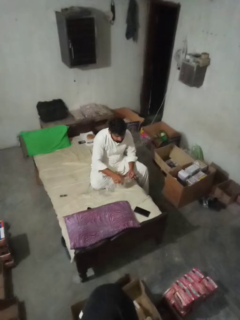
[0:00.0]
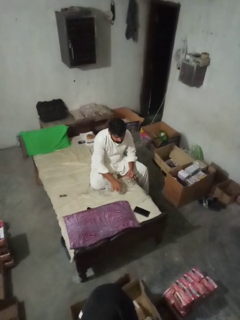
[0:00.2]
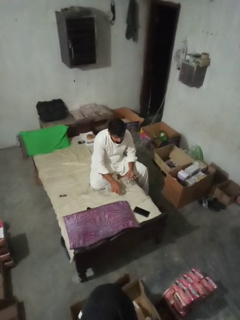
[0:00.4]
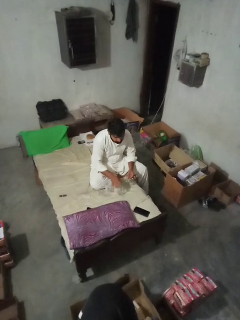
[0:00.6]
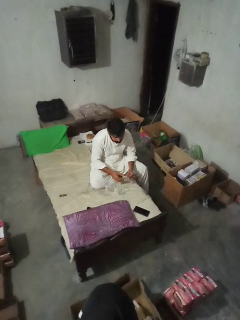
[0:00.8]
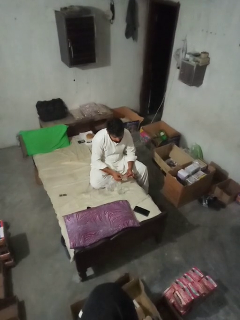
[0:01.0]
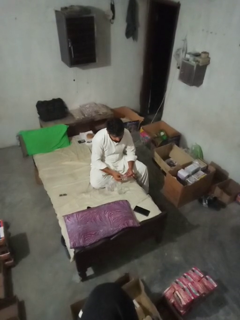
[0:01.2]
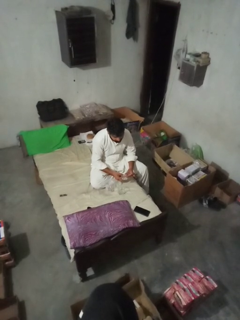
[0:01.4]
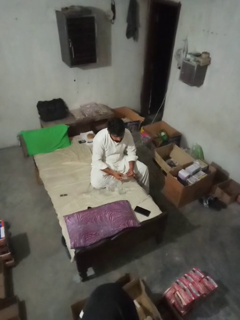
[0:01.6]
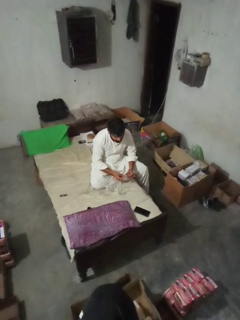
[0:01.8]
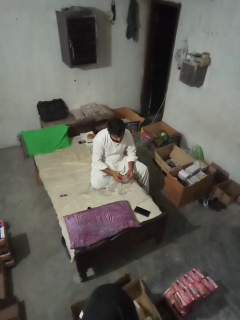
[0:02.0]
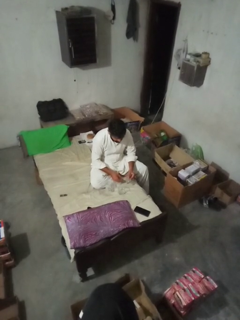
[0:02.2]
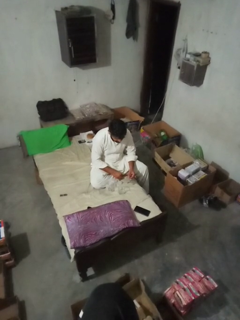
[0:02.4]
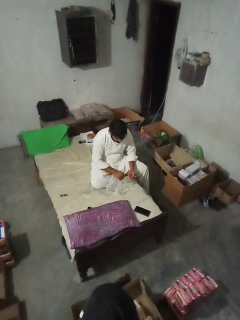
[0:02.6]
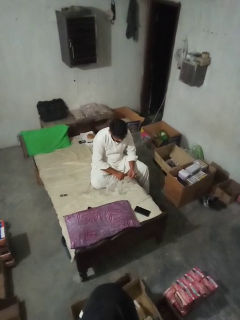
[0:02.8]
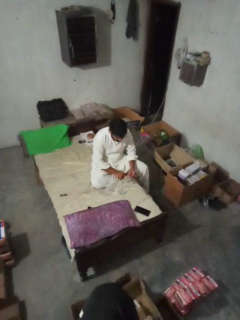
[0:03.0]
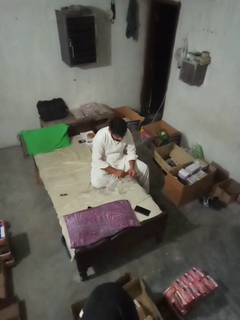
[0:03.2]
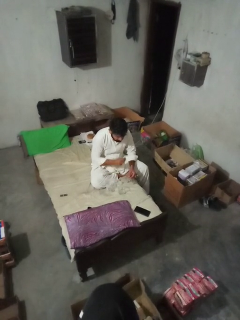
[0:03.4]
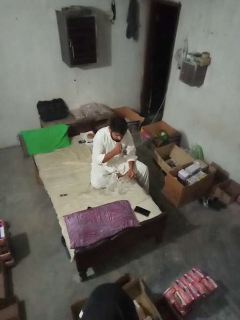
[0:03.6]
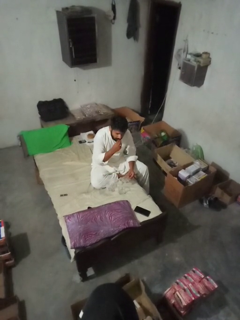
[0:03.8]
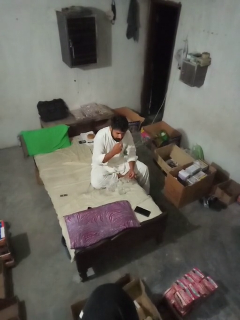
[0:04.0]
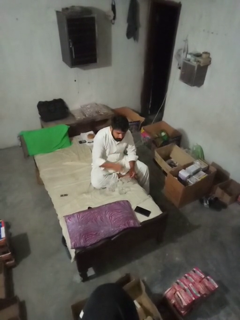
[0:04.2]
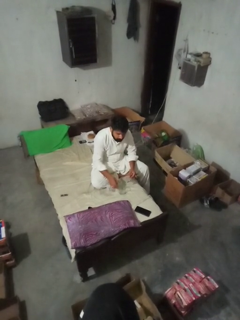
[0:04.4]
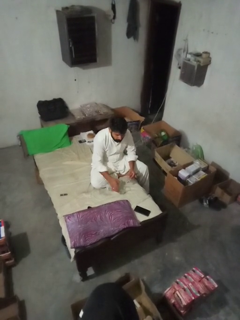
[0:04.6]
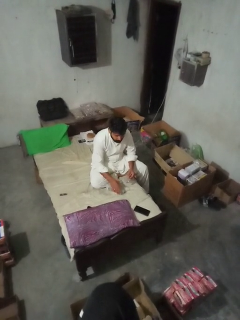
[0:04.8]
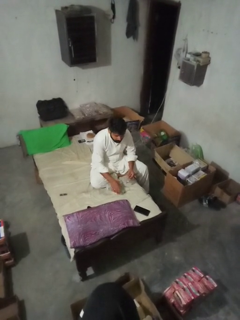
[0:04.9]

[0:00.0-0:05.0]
person takes medicine pills

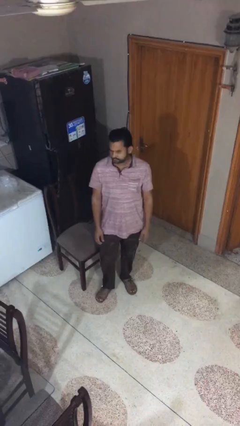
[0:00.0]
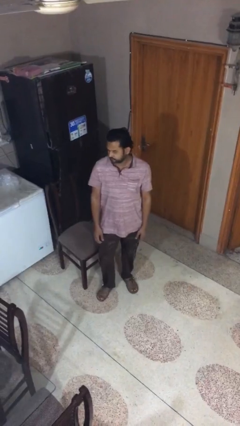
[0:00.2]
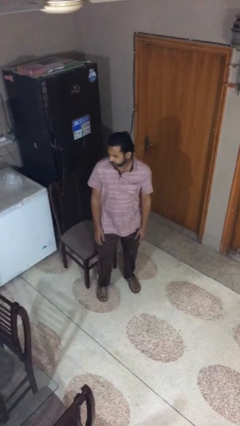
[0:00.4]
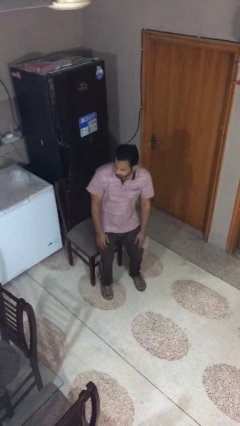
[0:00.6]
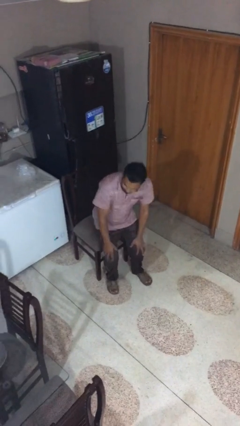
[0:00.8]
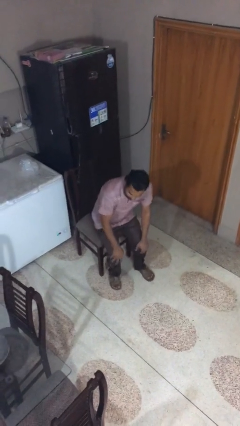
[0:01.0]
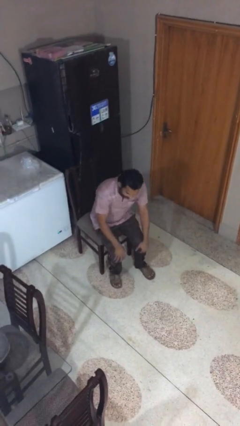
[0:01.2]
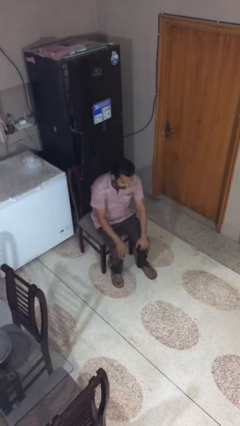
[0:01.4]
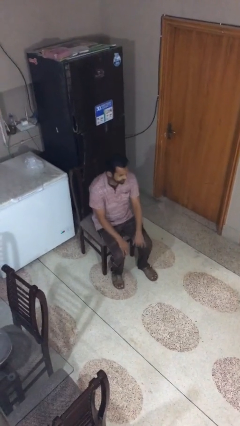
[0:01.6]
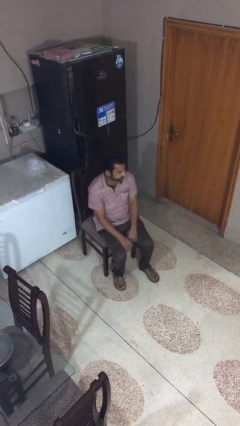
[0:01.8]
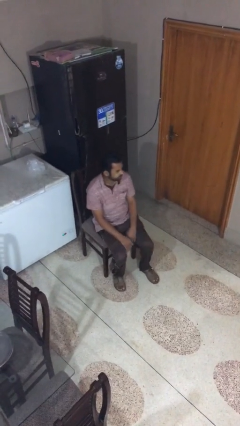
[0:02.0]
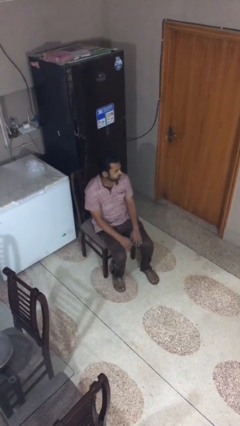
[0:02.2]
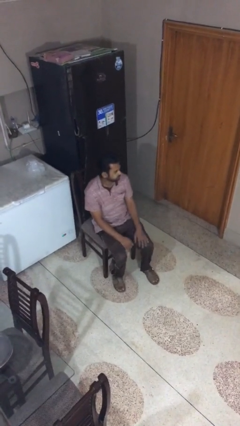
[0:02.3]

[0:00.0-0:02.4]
person sits down

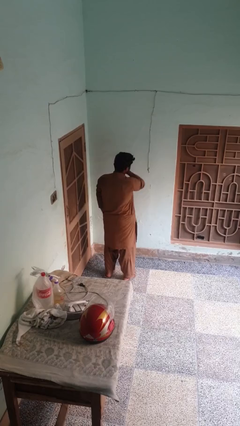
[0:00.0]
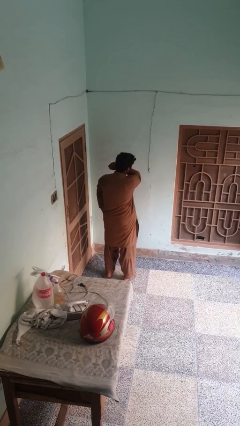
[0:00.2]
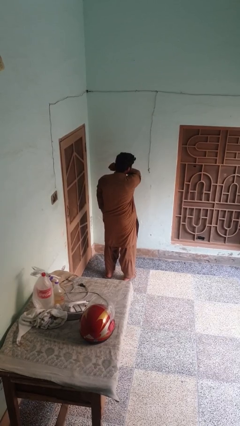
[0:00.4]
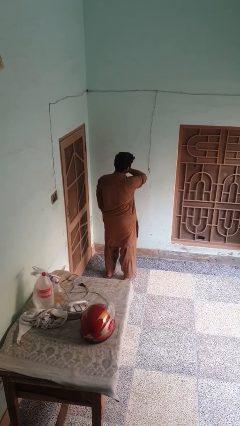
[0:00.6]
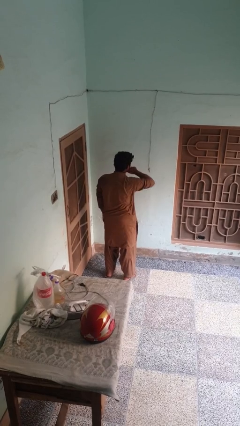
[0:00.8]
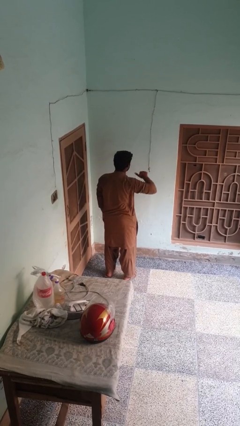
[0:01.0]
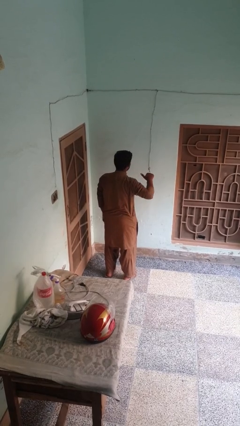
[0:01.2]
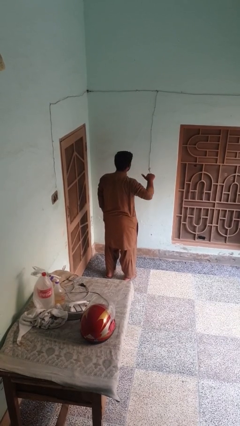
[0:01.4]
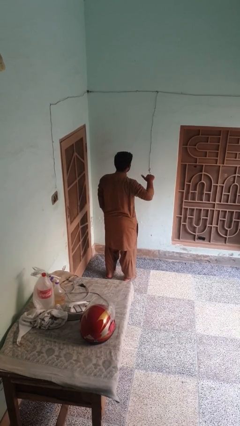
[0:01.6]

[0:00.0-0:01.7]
person gestures cut

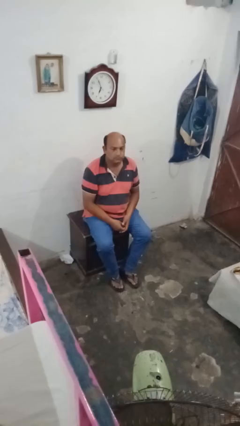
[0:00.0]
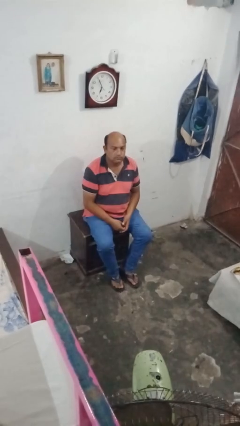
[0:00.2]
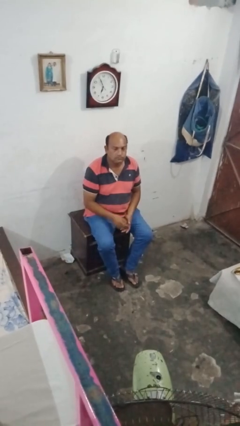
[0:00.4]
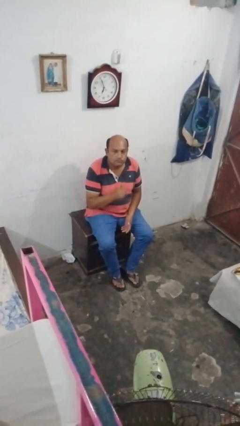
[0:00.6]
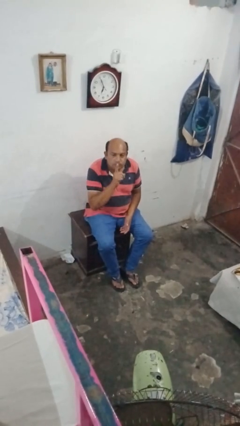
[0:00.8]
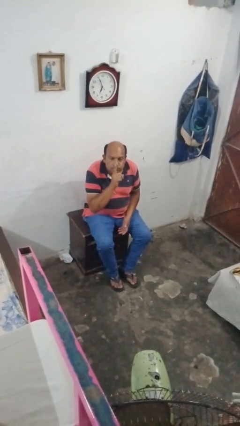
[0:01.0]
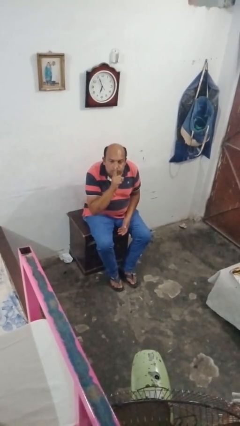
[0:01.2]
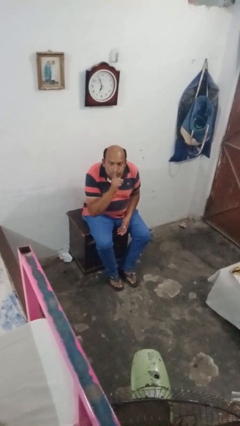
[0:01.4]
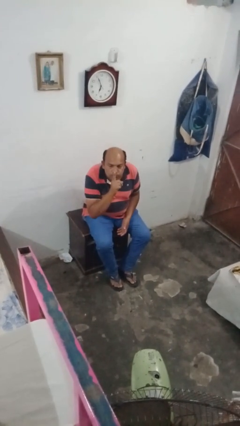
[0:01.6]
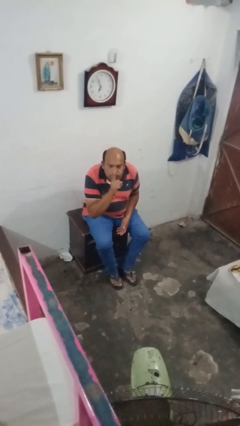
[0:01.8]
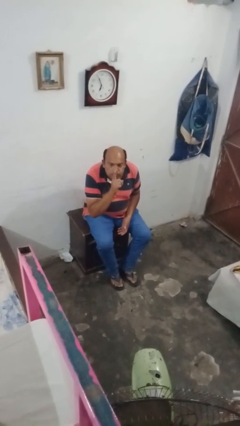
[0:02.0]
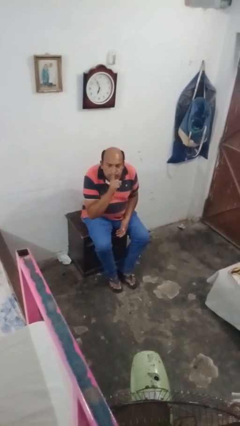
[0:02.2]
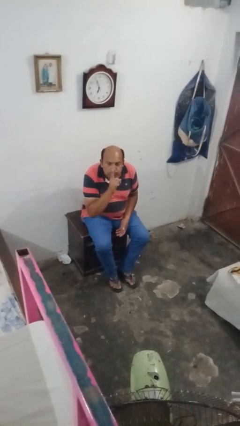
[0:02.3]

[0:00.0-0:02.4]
person gestures blow kiss

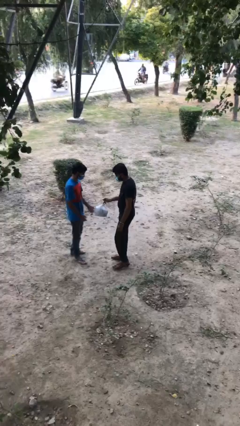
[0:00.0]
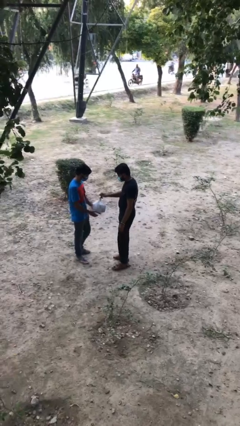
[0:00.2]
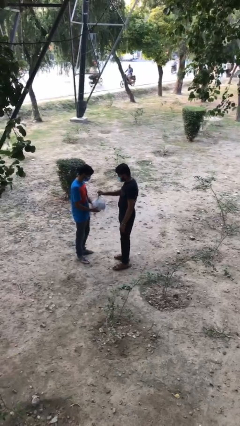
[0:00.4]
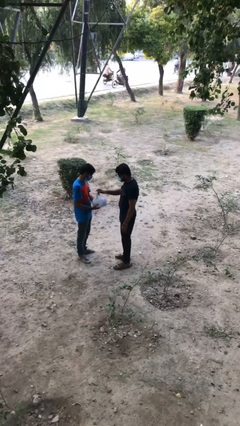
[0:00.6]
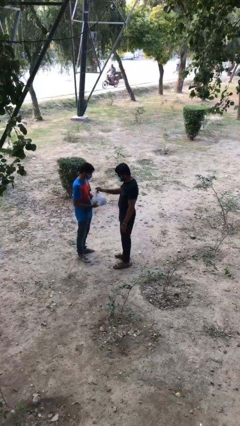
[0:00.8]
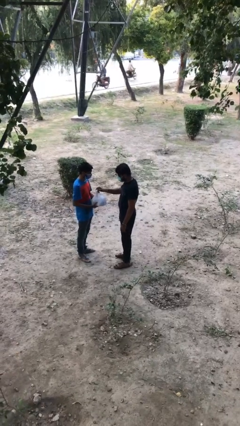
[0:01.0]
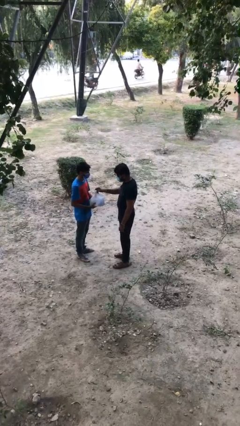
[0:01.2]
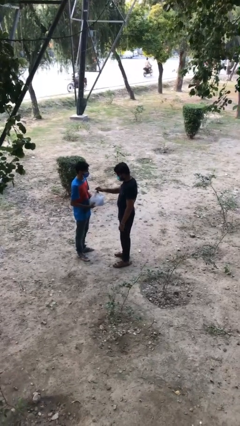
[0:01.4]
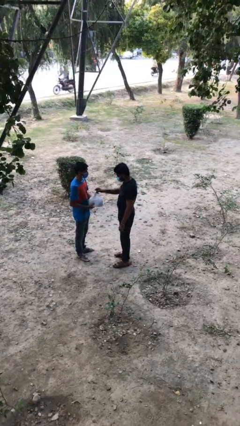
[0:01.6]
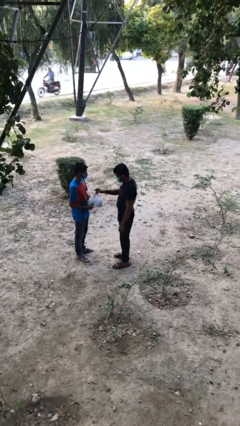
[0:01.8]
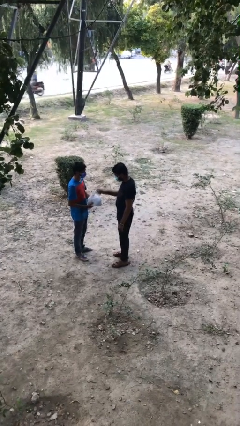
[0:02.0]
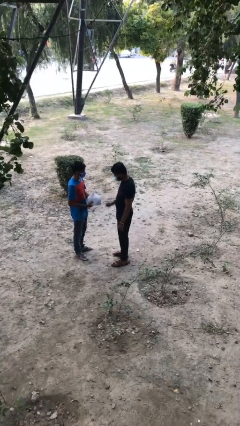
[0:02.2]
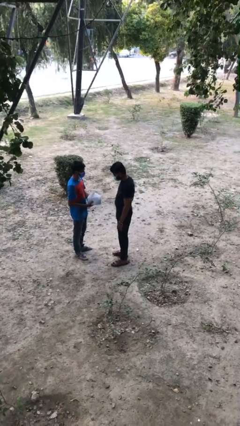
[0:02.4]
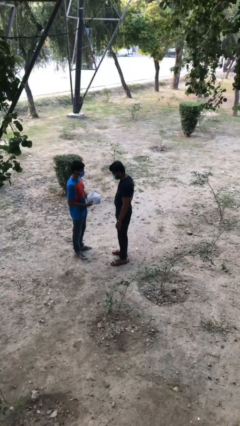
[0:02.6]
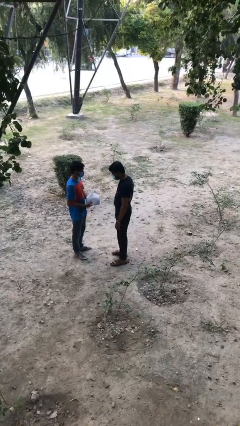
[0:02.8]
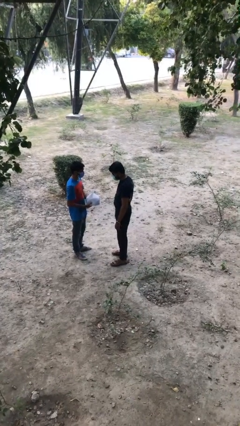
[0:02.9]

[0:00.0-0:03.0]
person transfers object to person

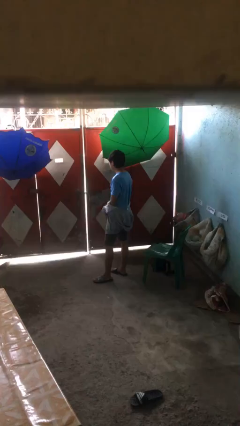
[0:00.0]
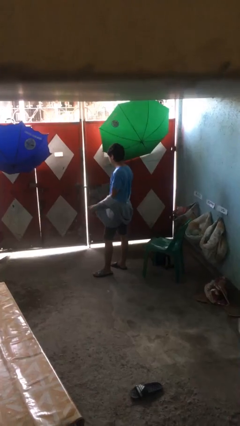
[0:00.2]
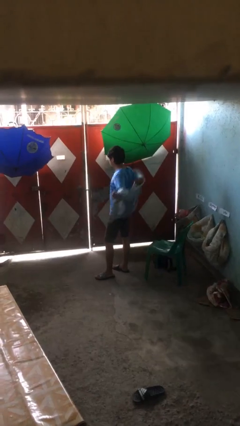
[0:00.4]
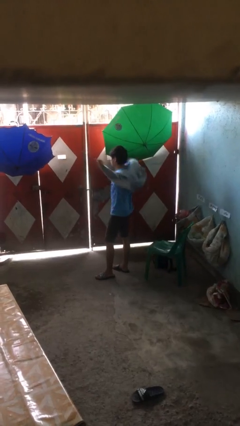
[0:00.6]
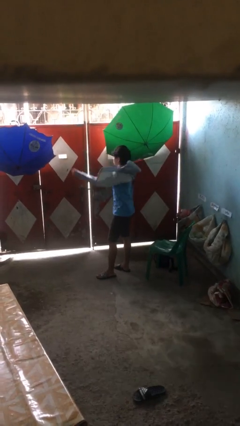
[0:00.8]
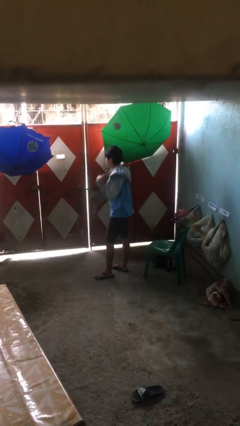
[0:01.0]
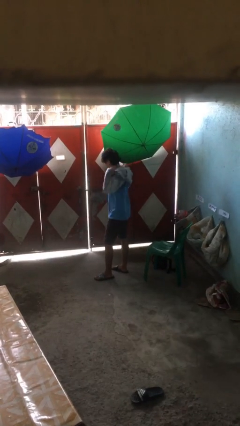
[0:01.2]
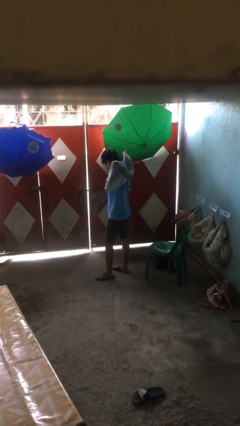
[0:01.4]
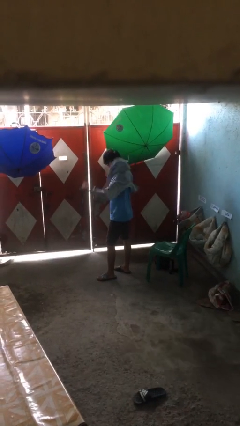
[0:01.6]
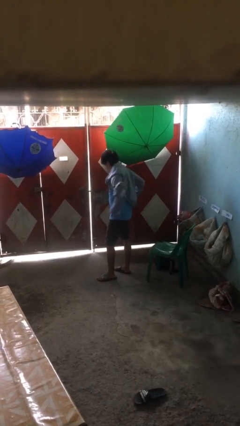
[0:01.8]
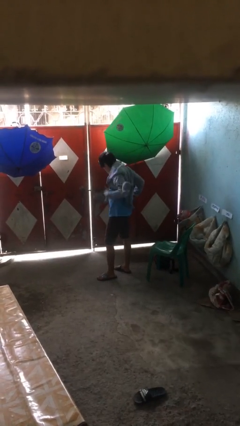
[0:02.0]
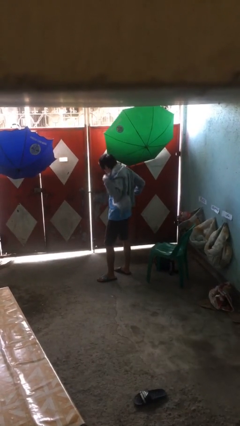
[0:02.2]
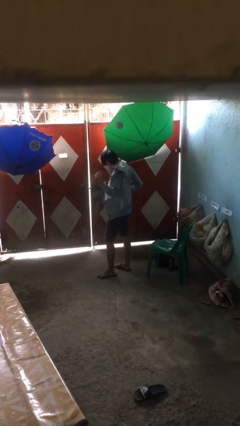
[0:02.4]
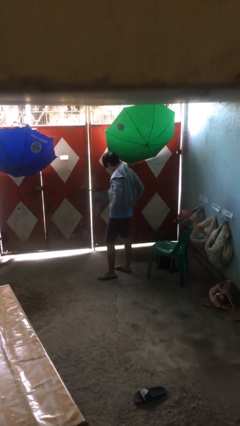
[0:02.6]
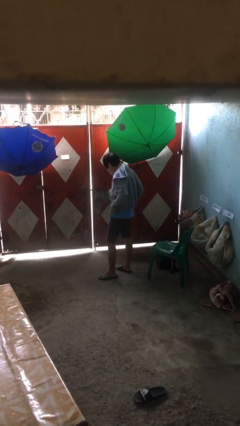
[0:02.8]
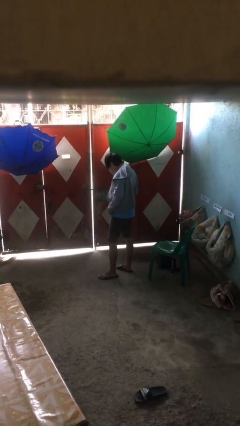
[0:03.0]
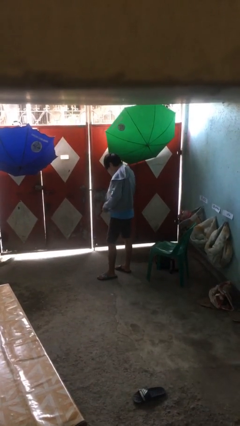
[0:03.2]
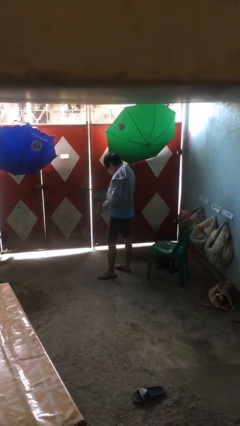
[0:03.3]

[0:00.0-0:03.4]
person puts on jacket

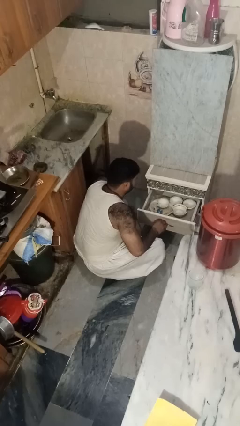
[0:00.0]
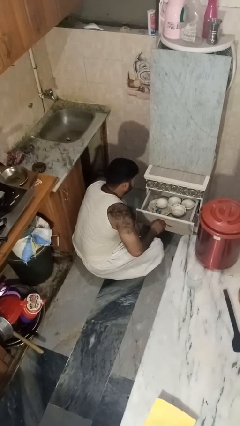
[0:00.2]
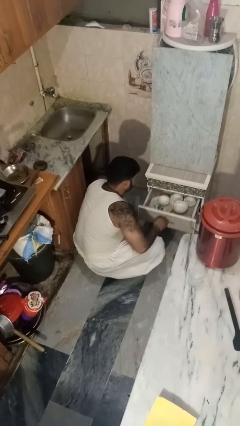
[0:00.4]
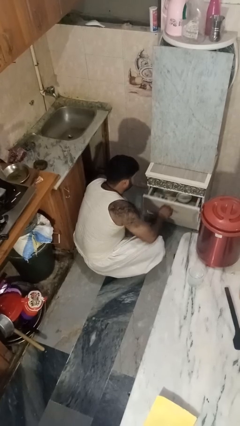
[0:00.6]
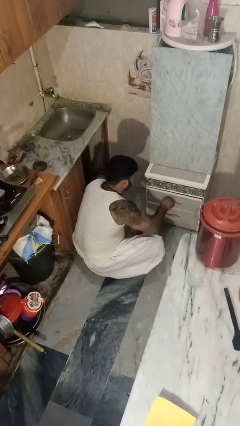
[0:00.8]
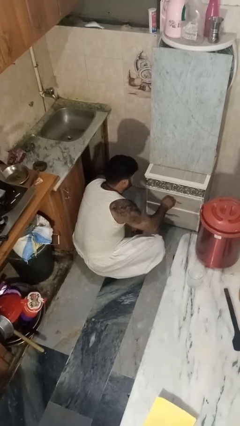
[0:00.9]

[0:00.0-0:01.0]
person closes kitchen drawer
